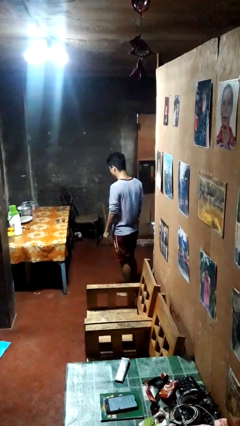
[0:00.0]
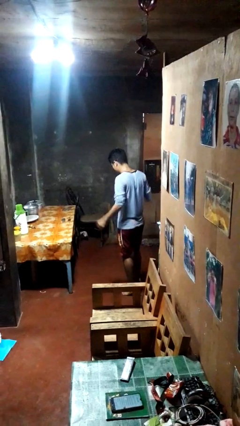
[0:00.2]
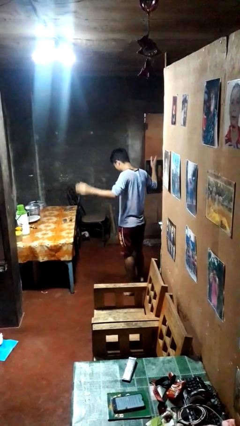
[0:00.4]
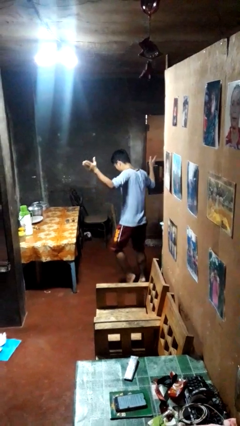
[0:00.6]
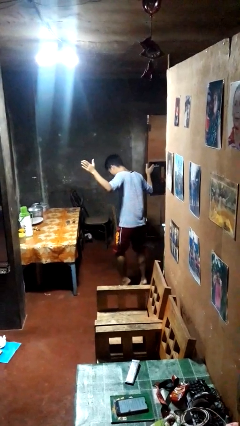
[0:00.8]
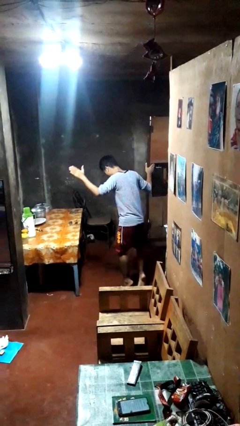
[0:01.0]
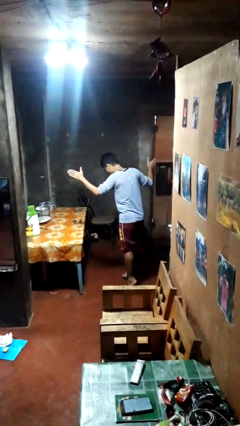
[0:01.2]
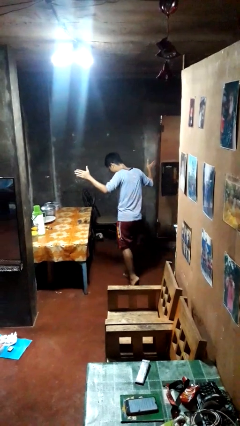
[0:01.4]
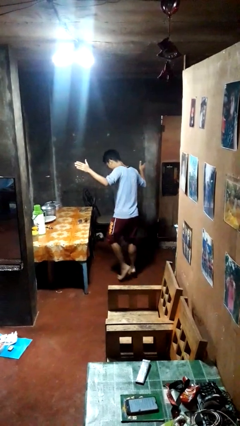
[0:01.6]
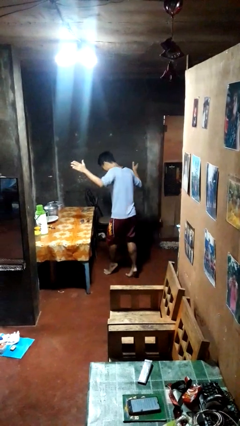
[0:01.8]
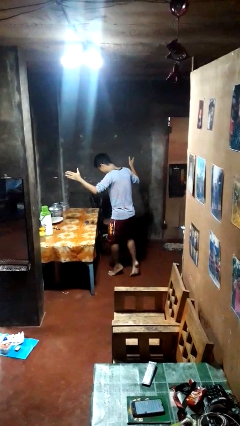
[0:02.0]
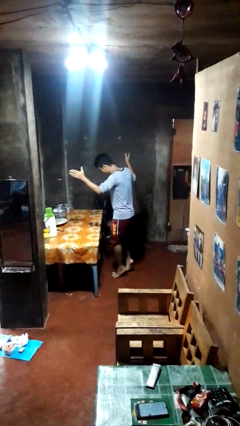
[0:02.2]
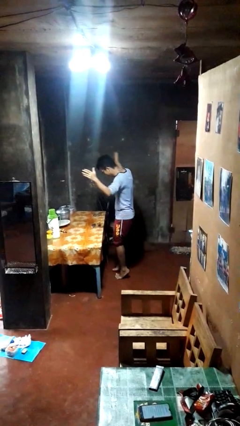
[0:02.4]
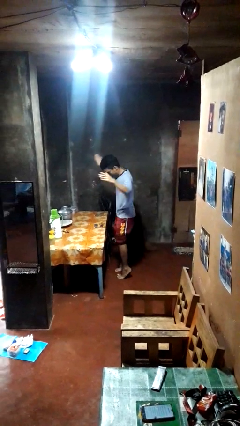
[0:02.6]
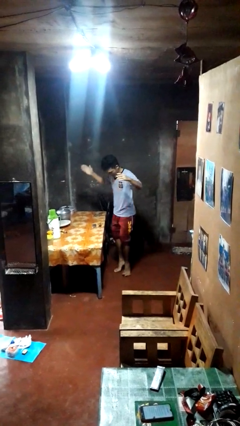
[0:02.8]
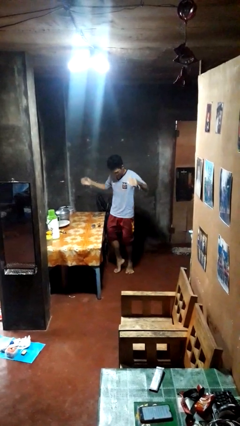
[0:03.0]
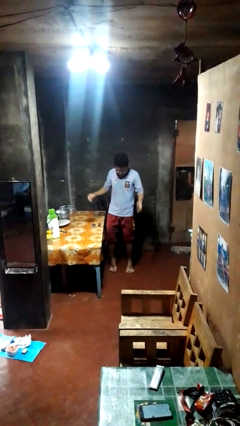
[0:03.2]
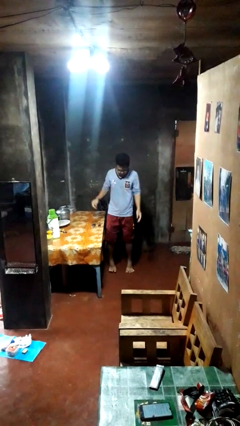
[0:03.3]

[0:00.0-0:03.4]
person walks tiptoe

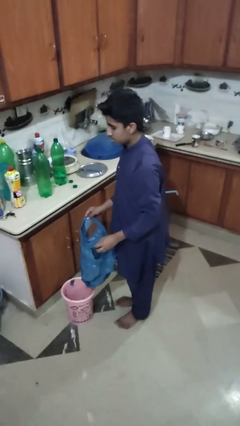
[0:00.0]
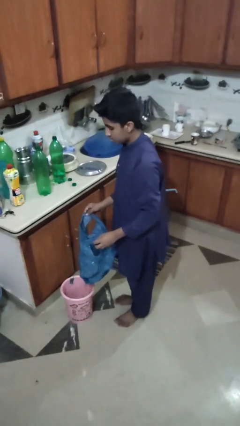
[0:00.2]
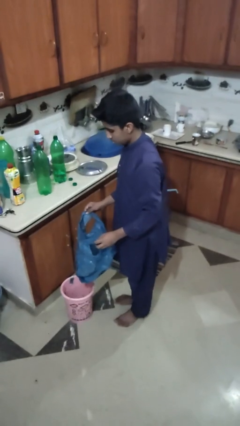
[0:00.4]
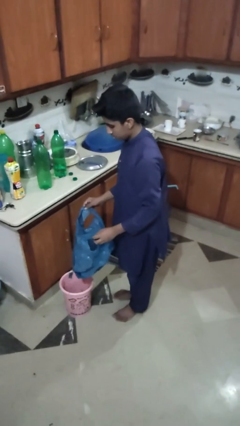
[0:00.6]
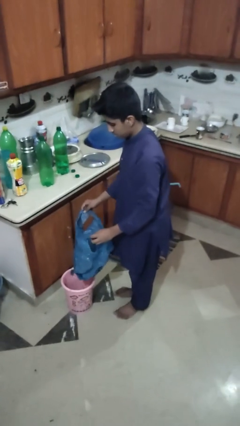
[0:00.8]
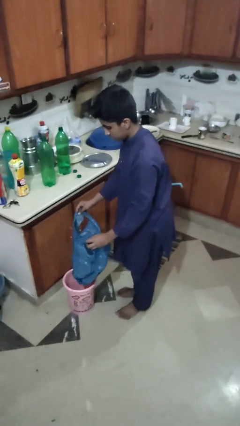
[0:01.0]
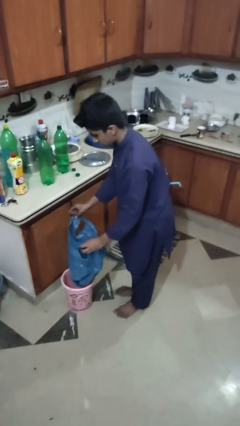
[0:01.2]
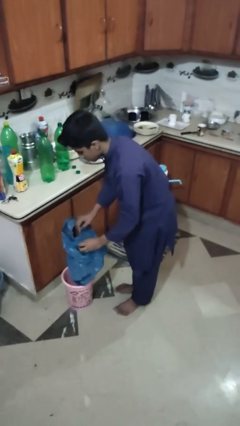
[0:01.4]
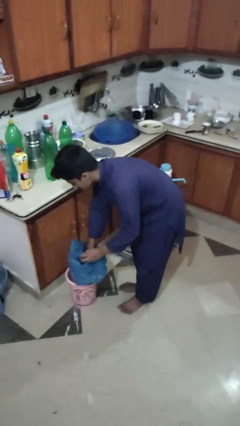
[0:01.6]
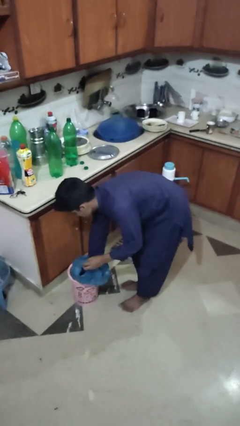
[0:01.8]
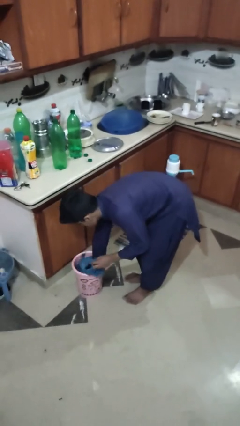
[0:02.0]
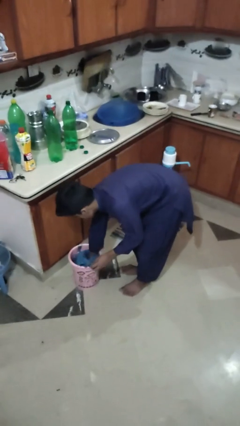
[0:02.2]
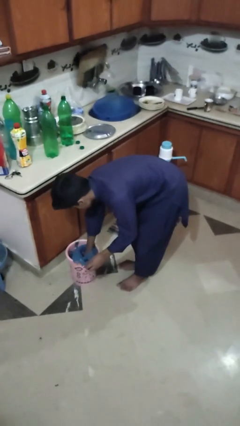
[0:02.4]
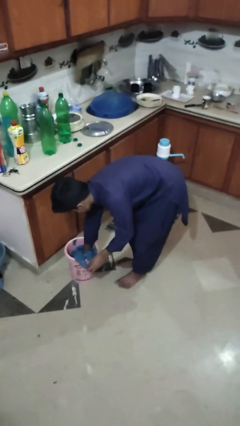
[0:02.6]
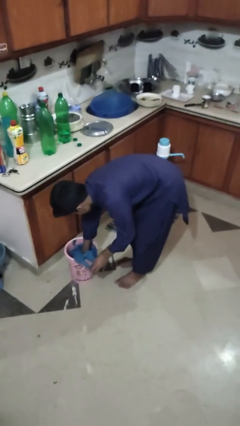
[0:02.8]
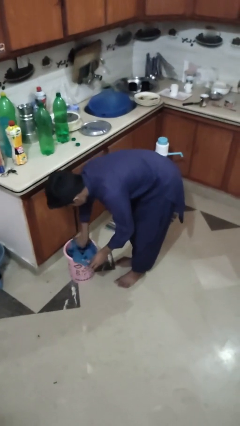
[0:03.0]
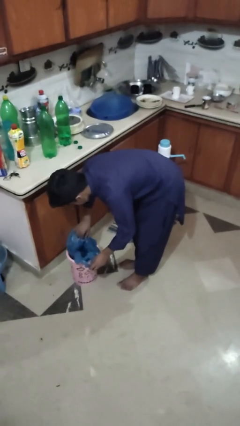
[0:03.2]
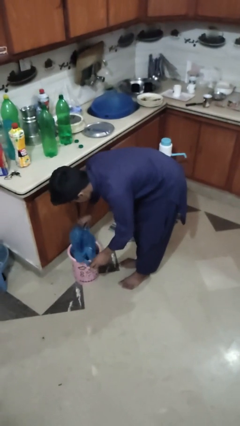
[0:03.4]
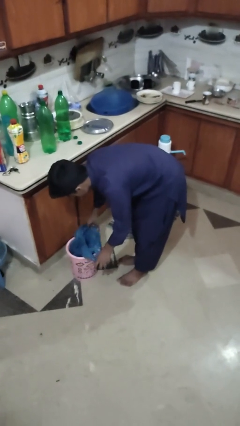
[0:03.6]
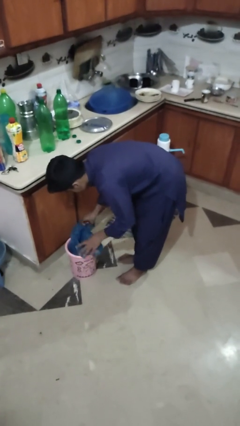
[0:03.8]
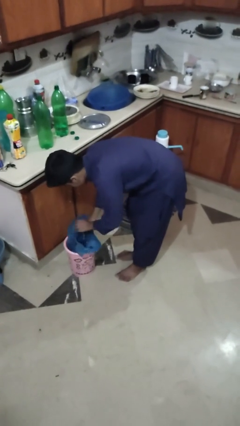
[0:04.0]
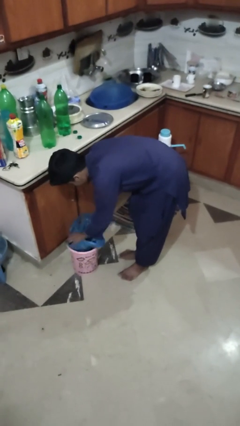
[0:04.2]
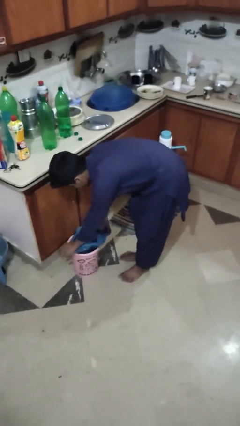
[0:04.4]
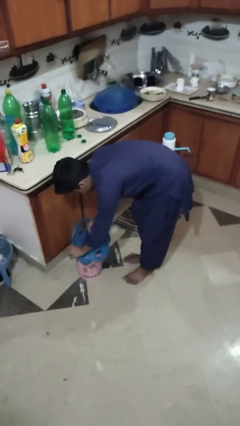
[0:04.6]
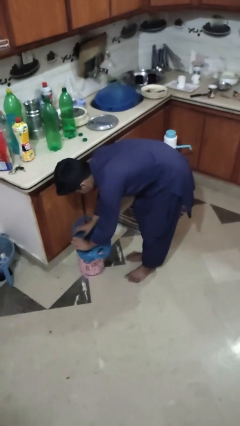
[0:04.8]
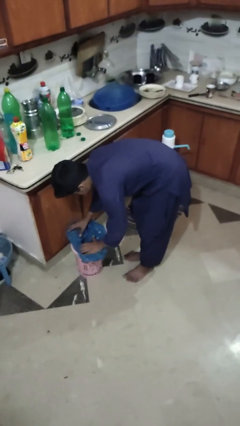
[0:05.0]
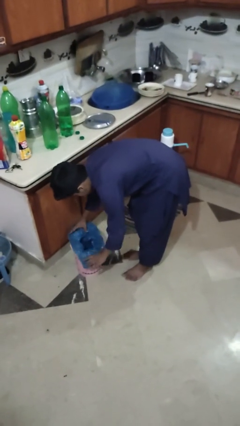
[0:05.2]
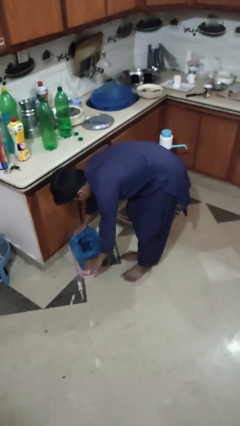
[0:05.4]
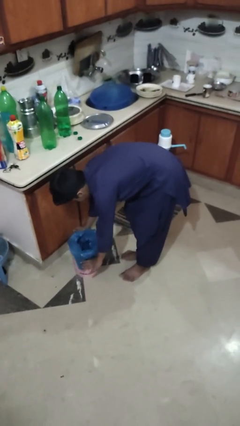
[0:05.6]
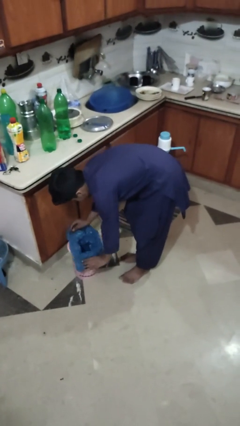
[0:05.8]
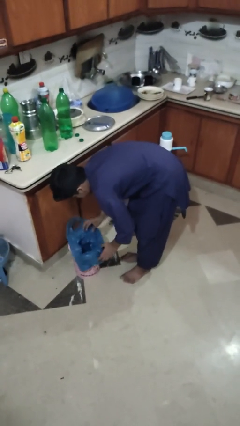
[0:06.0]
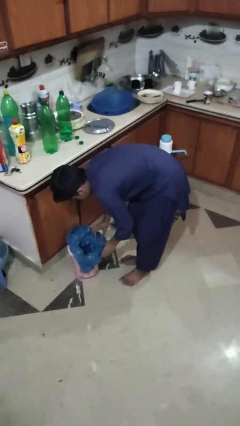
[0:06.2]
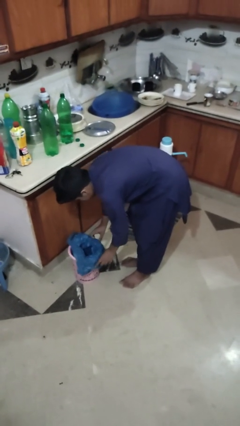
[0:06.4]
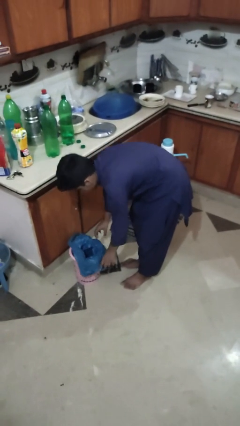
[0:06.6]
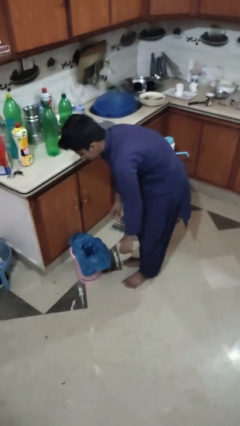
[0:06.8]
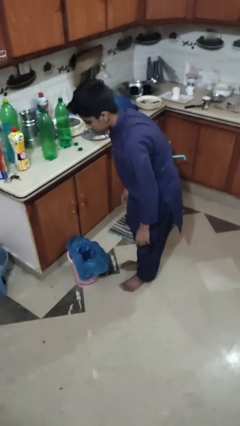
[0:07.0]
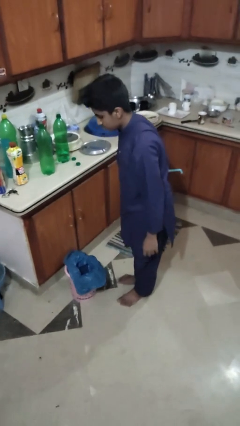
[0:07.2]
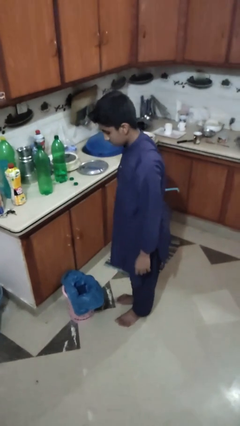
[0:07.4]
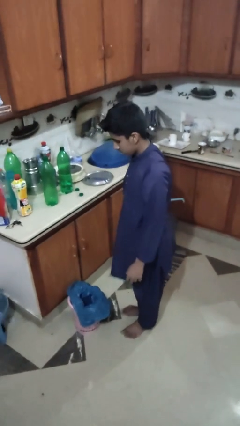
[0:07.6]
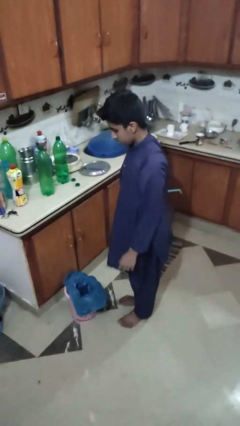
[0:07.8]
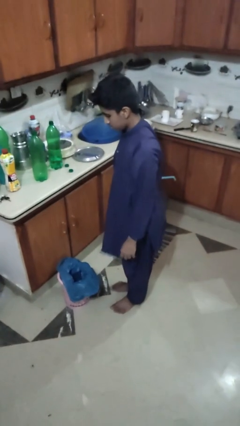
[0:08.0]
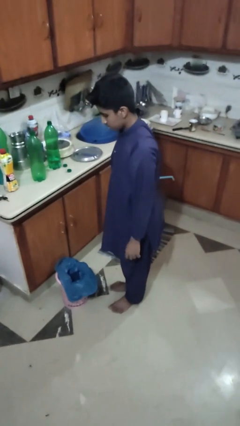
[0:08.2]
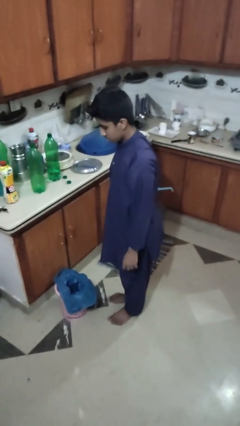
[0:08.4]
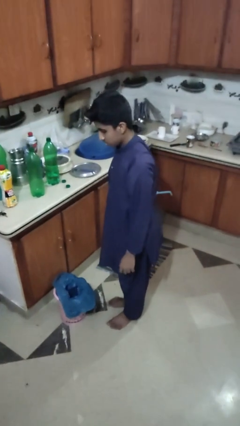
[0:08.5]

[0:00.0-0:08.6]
person inserts trashbag into trashcan

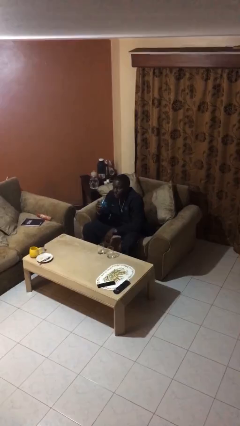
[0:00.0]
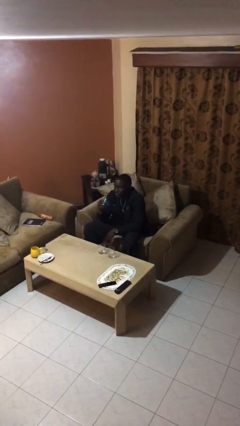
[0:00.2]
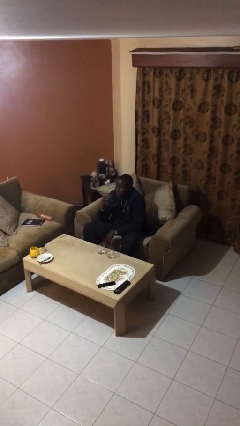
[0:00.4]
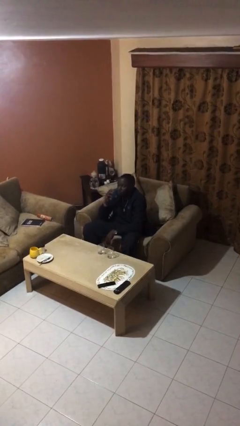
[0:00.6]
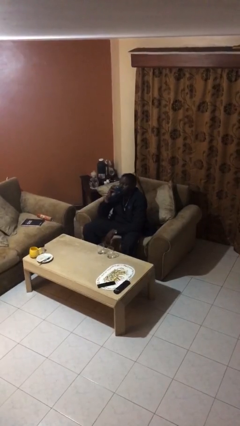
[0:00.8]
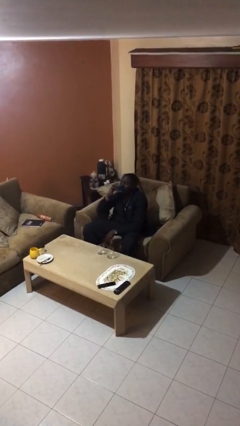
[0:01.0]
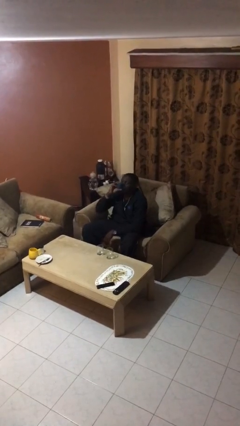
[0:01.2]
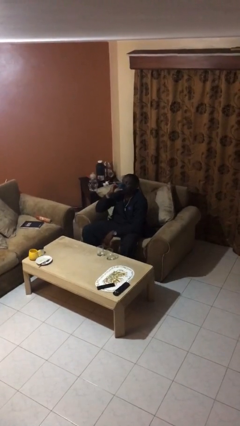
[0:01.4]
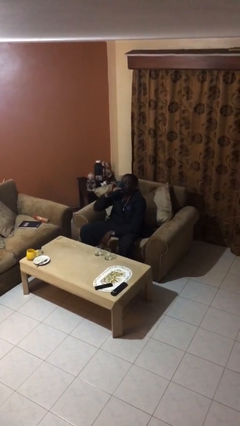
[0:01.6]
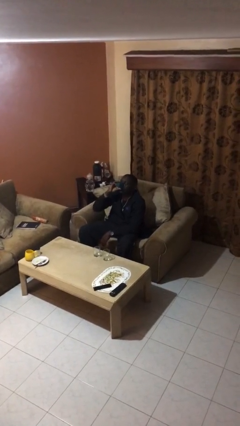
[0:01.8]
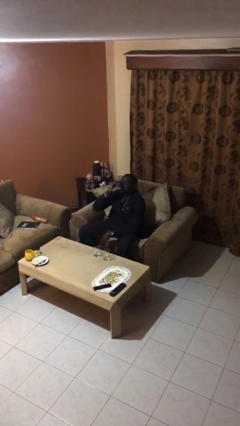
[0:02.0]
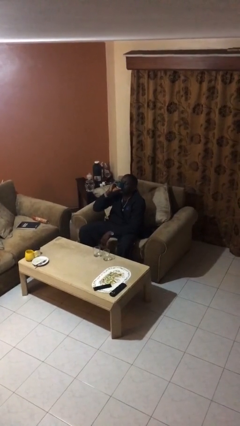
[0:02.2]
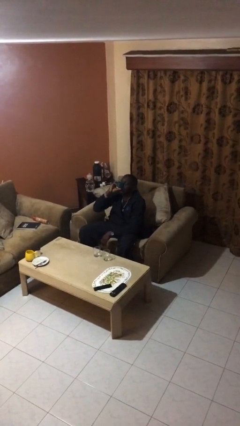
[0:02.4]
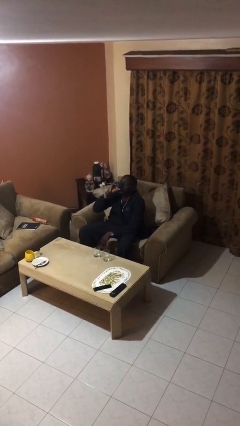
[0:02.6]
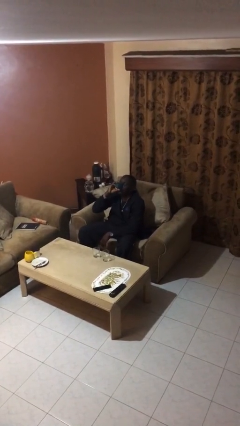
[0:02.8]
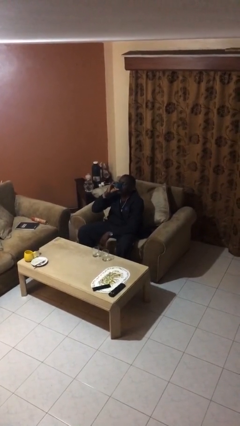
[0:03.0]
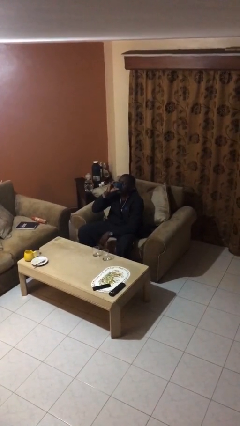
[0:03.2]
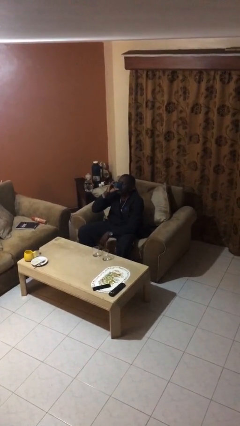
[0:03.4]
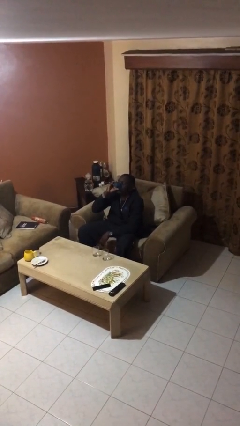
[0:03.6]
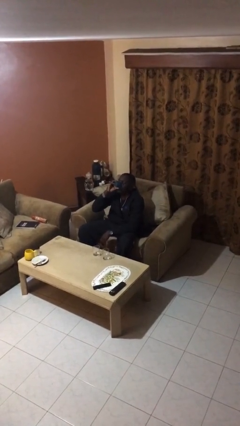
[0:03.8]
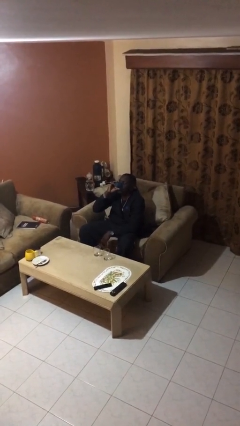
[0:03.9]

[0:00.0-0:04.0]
person drinks from shotglass

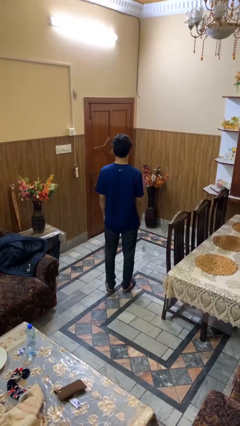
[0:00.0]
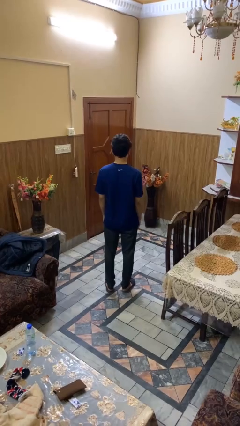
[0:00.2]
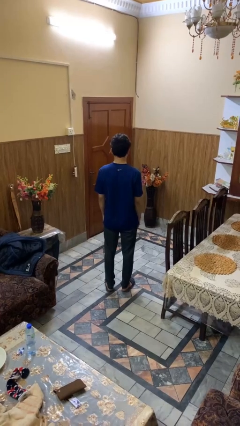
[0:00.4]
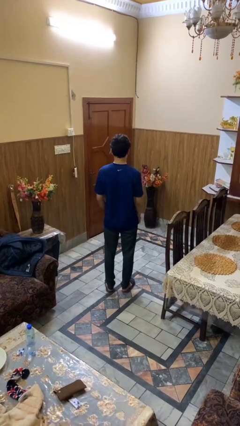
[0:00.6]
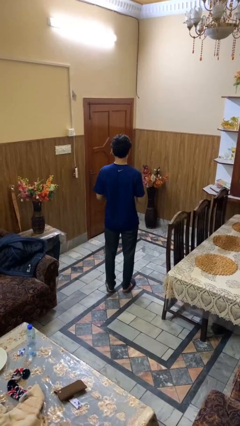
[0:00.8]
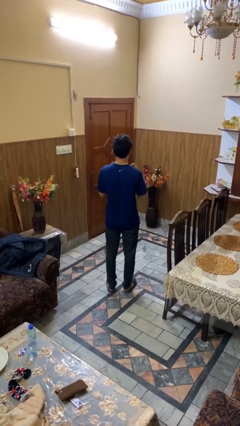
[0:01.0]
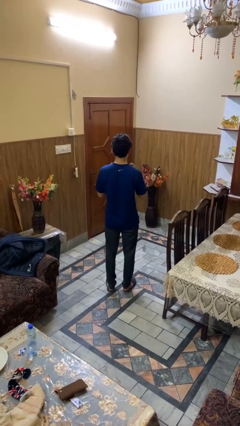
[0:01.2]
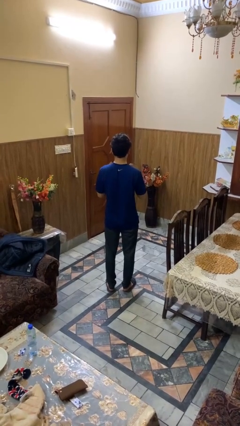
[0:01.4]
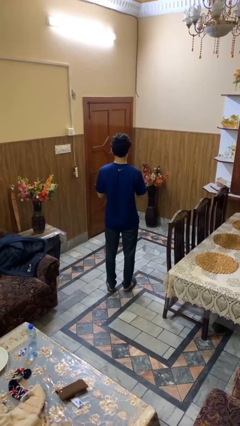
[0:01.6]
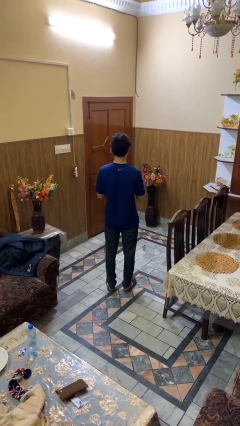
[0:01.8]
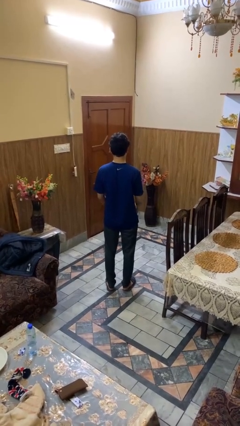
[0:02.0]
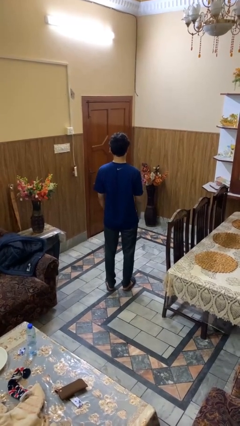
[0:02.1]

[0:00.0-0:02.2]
person drums on chest
